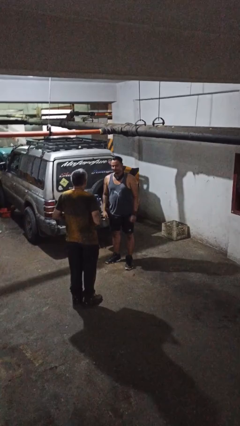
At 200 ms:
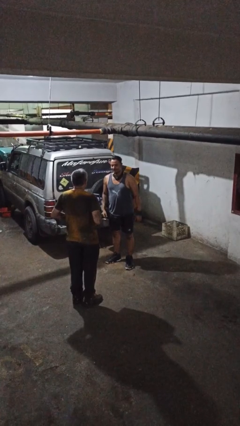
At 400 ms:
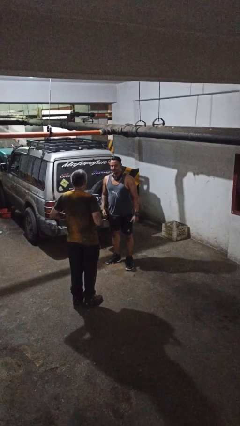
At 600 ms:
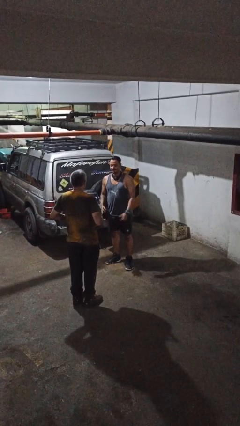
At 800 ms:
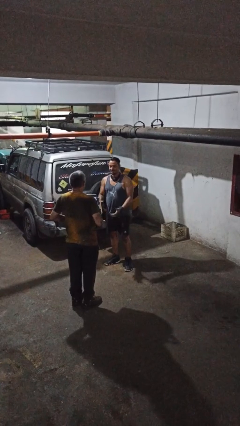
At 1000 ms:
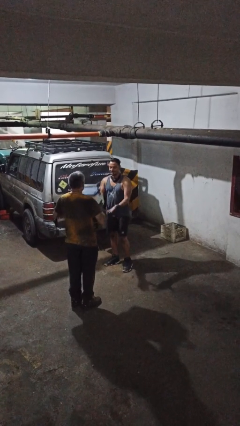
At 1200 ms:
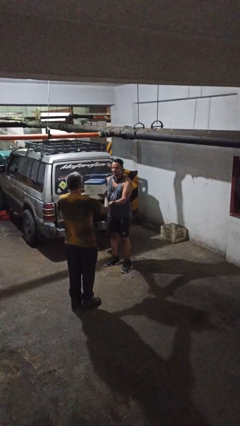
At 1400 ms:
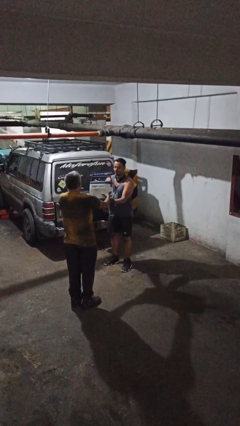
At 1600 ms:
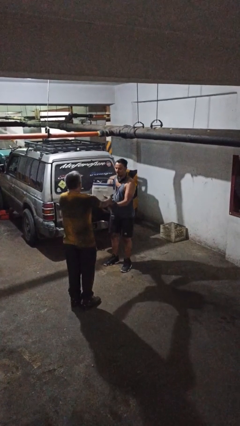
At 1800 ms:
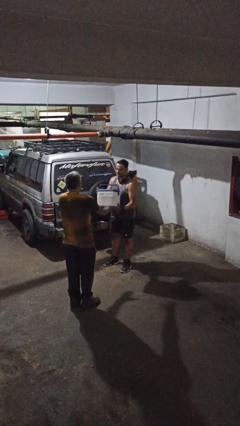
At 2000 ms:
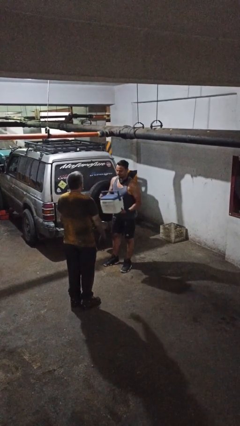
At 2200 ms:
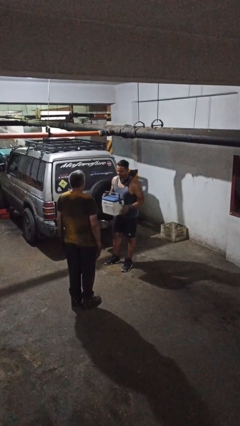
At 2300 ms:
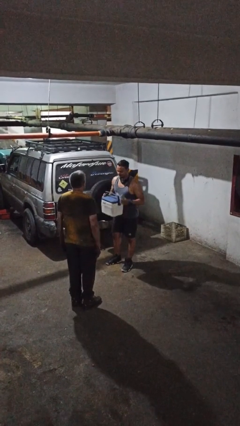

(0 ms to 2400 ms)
person transfers object to person

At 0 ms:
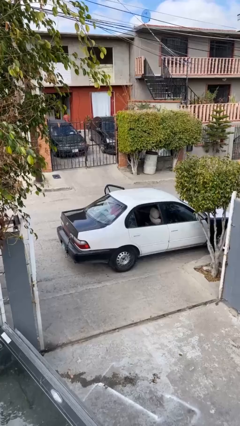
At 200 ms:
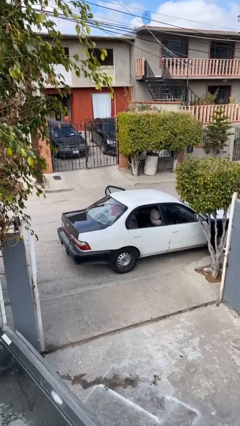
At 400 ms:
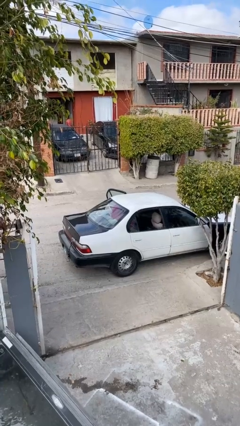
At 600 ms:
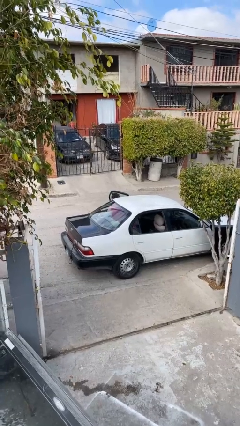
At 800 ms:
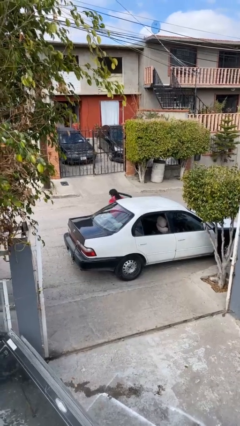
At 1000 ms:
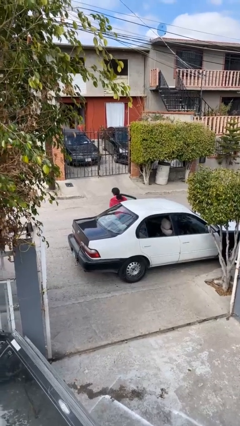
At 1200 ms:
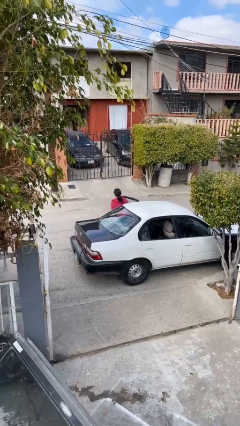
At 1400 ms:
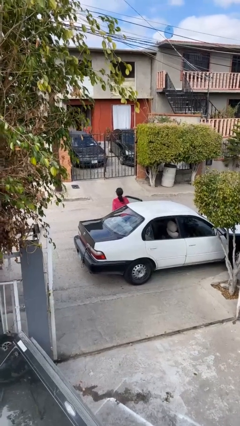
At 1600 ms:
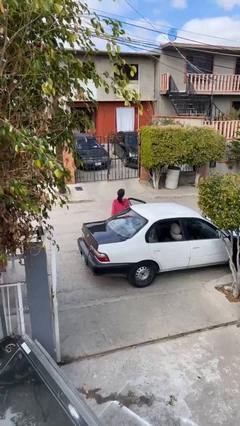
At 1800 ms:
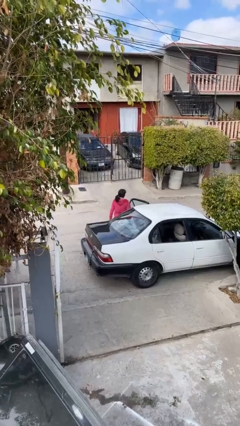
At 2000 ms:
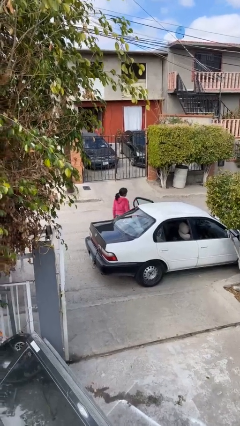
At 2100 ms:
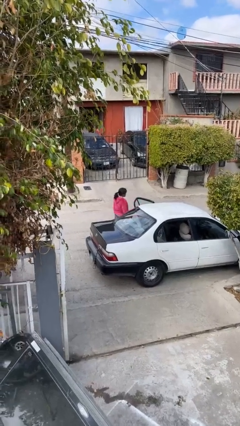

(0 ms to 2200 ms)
person exits car

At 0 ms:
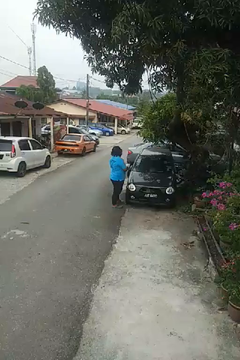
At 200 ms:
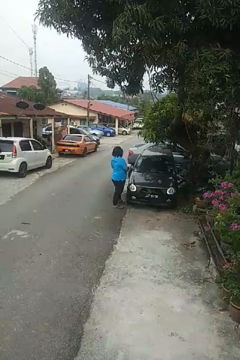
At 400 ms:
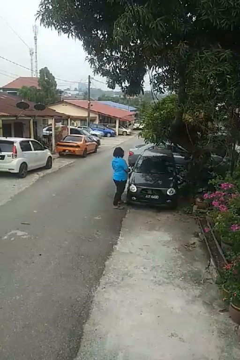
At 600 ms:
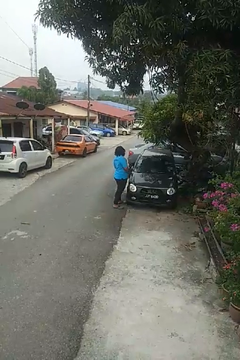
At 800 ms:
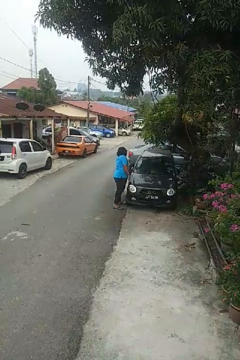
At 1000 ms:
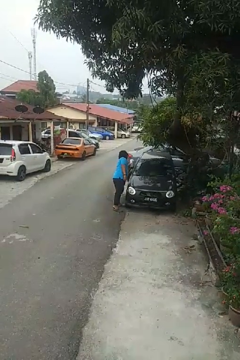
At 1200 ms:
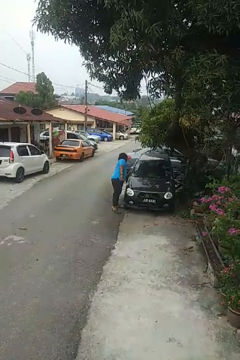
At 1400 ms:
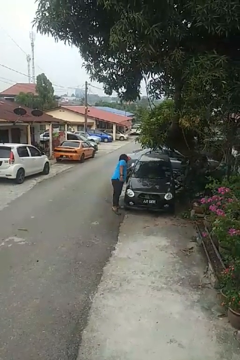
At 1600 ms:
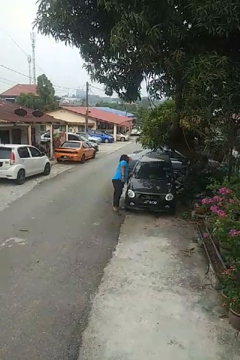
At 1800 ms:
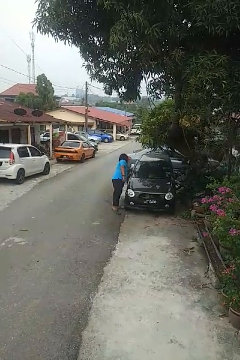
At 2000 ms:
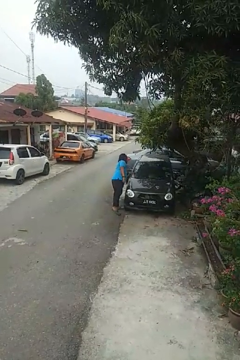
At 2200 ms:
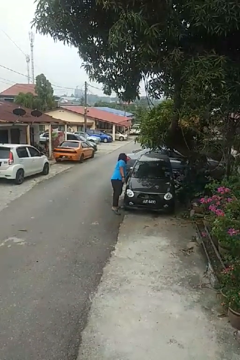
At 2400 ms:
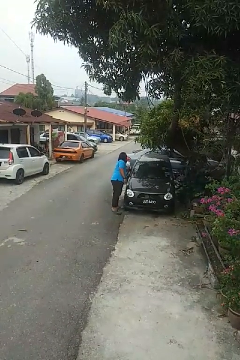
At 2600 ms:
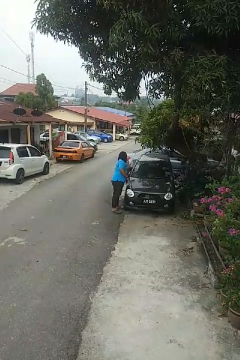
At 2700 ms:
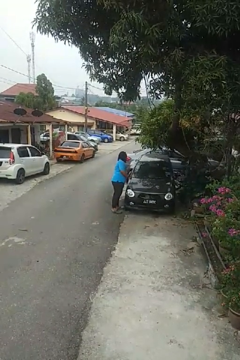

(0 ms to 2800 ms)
person polishes car with rag

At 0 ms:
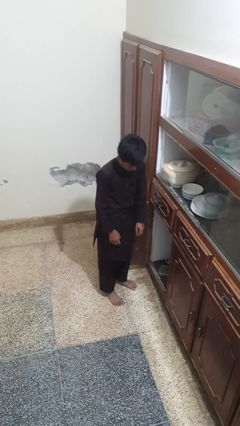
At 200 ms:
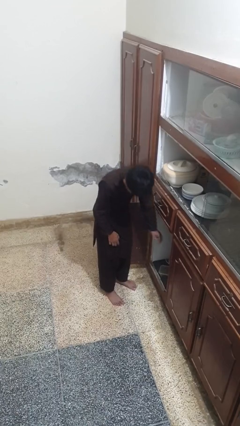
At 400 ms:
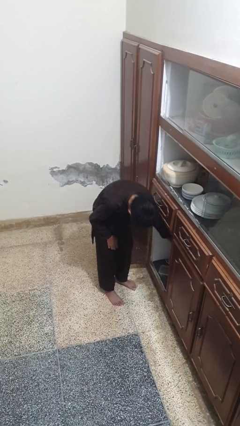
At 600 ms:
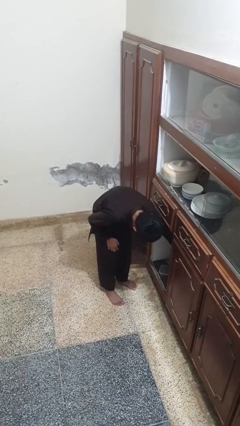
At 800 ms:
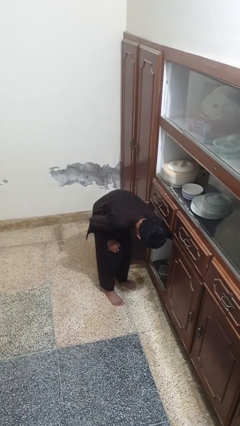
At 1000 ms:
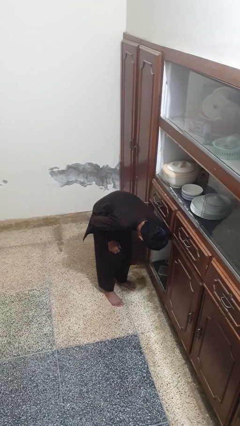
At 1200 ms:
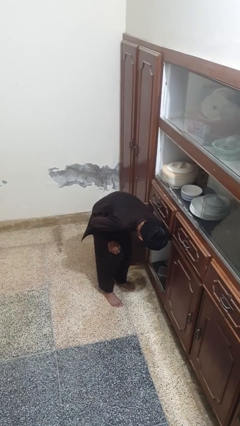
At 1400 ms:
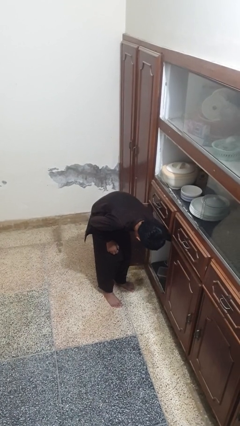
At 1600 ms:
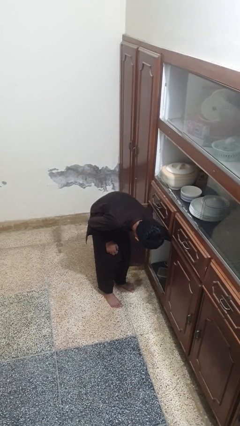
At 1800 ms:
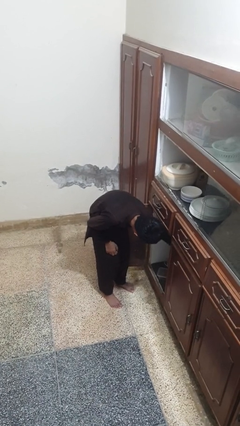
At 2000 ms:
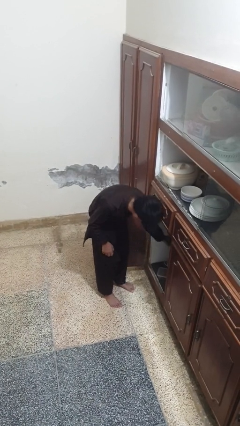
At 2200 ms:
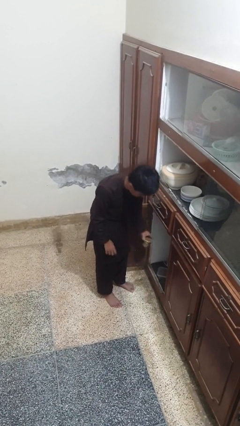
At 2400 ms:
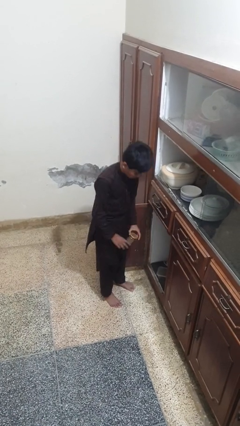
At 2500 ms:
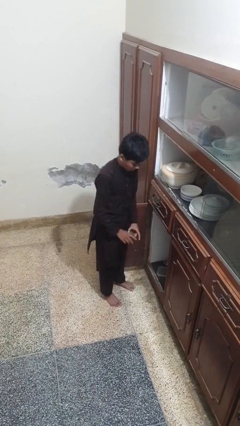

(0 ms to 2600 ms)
person takes object from cabinet

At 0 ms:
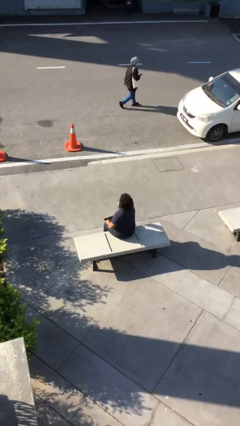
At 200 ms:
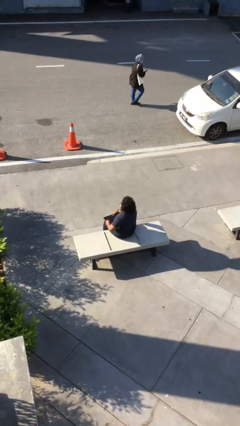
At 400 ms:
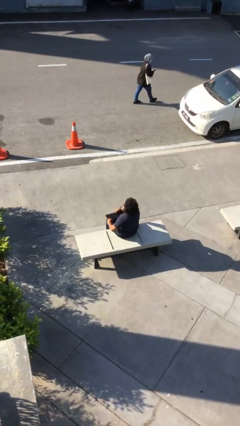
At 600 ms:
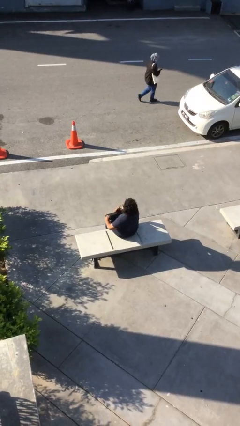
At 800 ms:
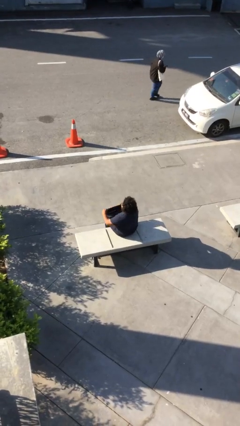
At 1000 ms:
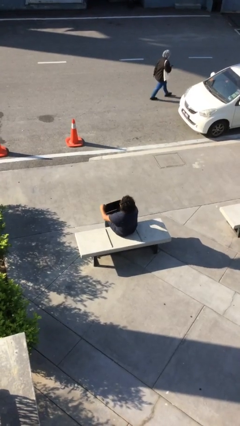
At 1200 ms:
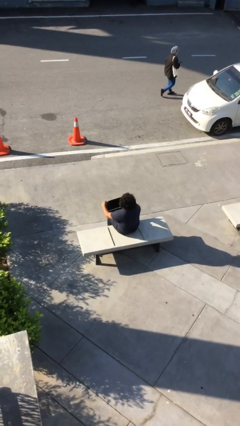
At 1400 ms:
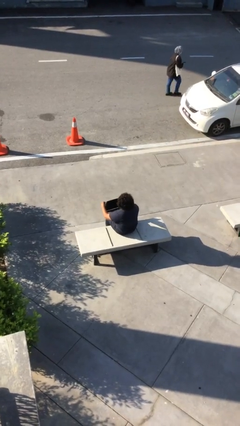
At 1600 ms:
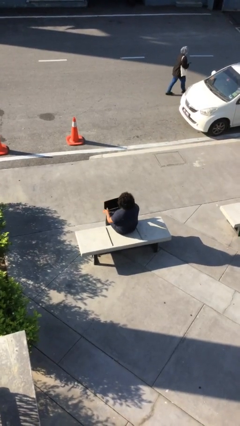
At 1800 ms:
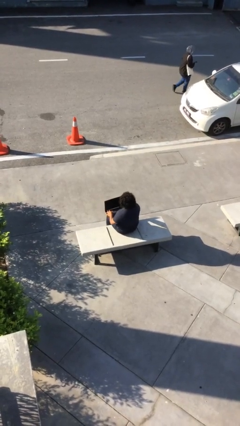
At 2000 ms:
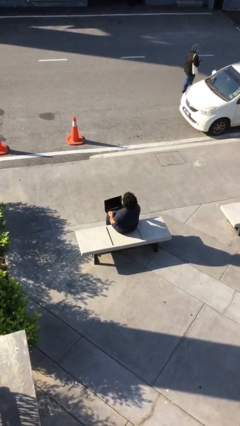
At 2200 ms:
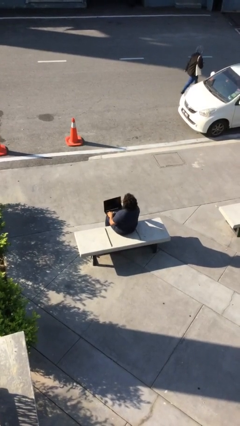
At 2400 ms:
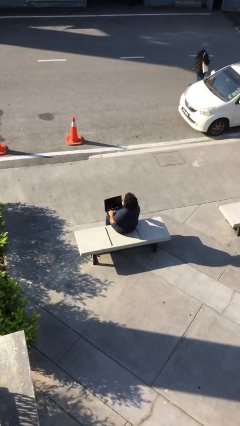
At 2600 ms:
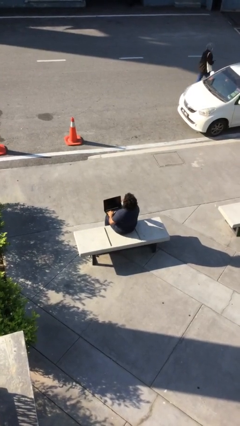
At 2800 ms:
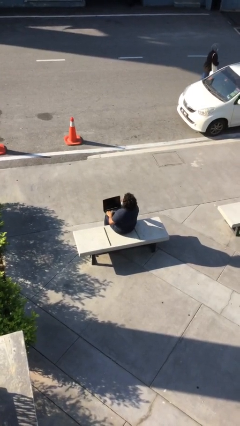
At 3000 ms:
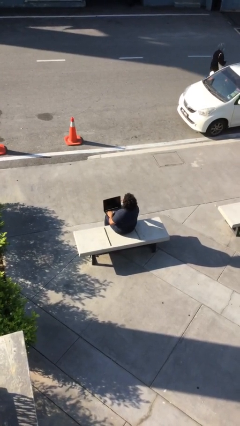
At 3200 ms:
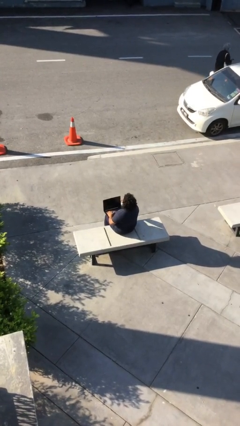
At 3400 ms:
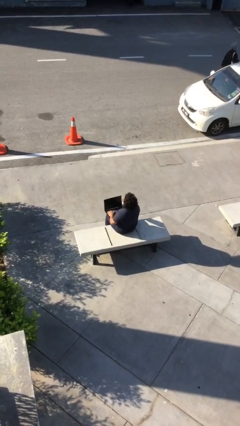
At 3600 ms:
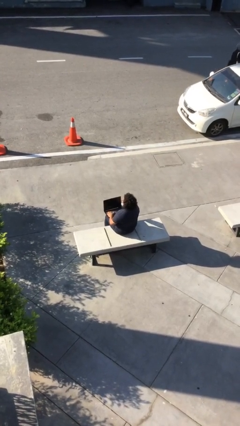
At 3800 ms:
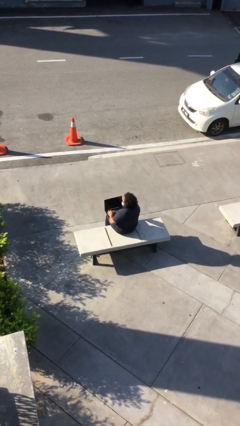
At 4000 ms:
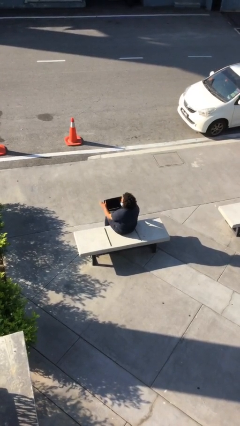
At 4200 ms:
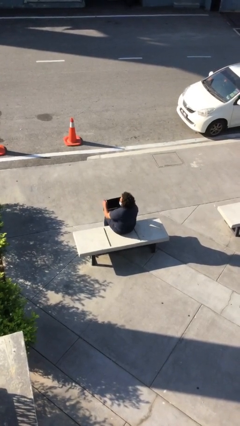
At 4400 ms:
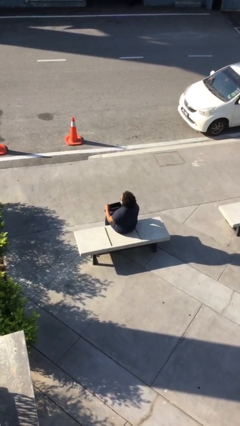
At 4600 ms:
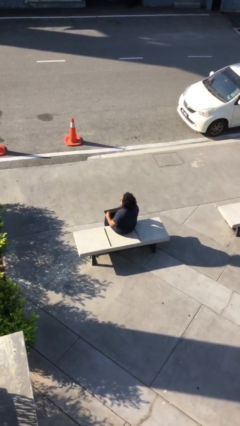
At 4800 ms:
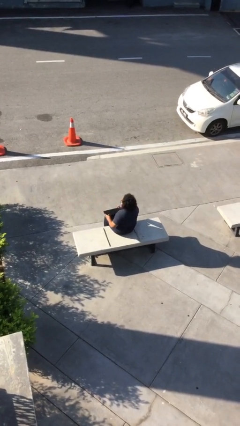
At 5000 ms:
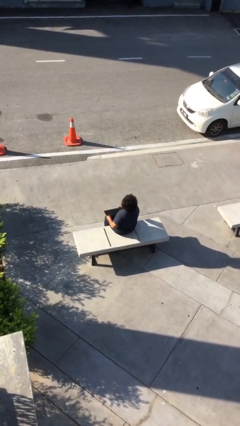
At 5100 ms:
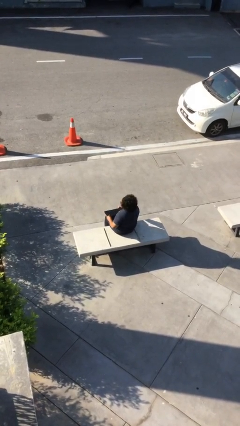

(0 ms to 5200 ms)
person interacts with laptop

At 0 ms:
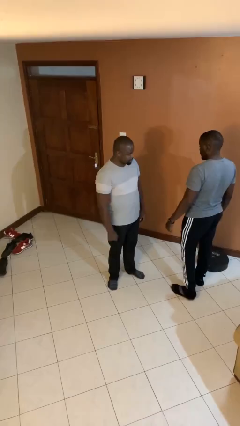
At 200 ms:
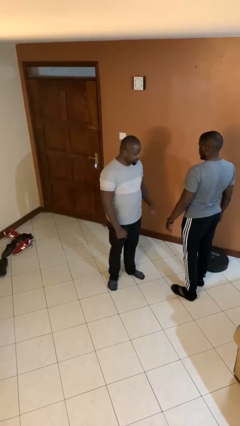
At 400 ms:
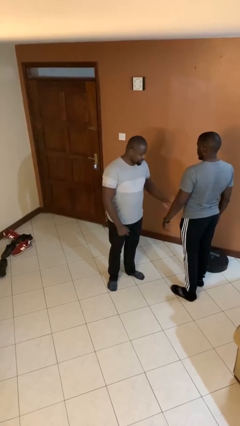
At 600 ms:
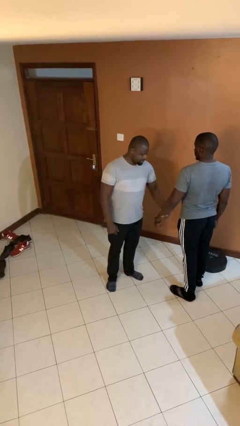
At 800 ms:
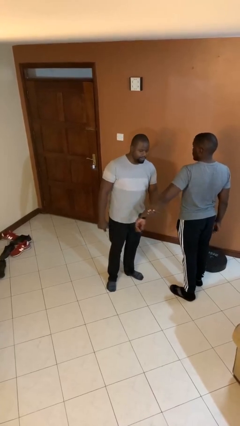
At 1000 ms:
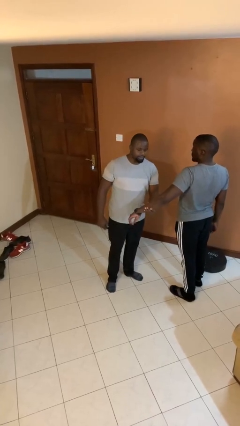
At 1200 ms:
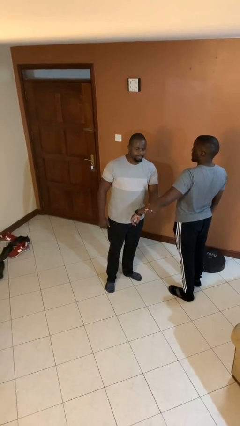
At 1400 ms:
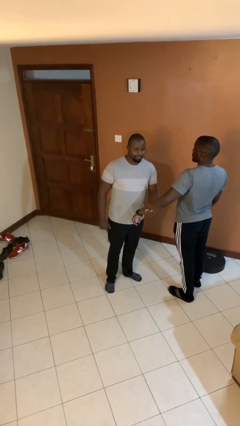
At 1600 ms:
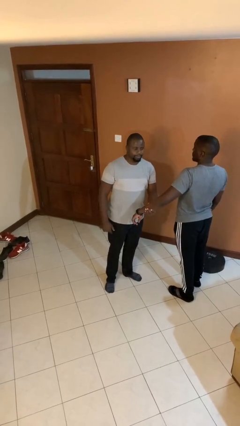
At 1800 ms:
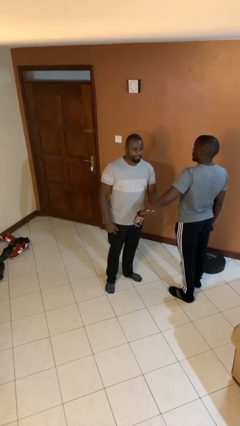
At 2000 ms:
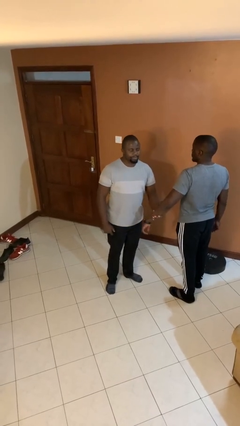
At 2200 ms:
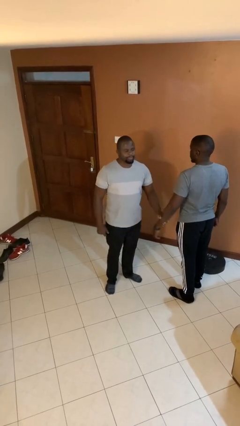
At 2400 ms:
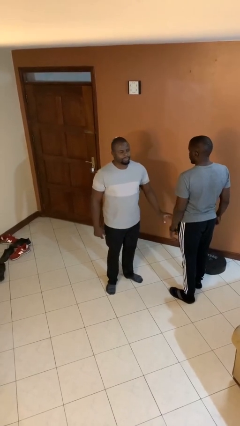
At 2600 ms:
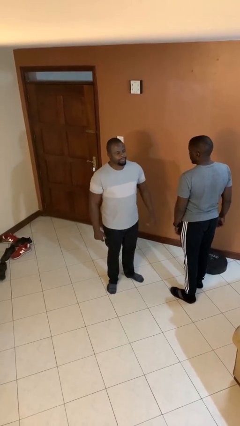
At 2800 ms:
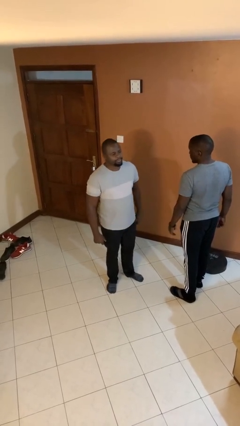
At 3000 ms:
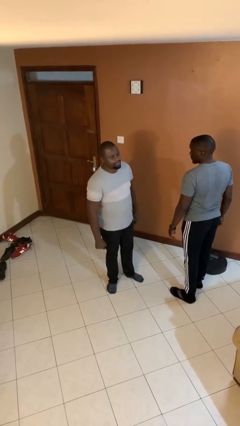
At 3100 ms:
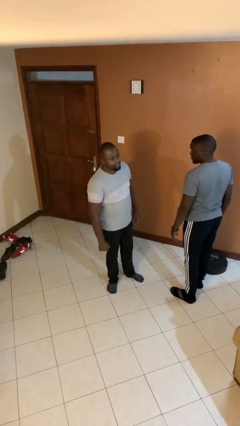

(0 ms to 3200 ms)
person grabs person by forearm
